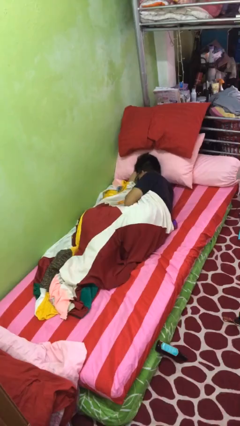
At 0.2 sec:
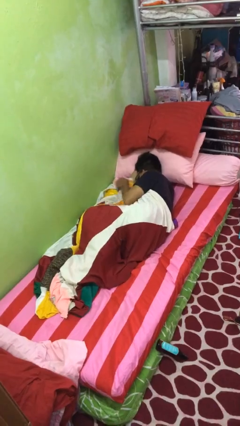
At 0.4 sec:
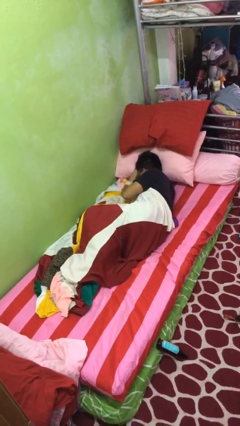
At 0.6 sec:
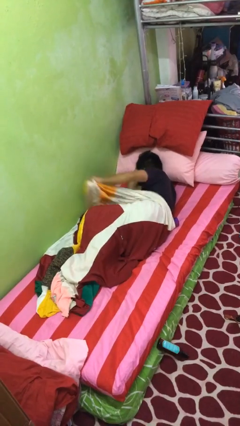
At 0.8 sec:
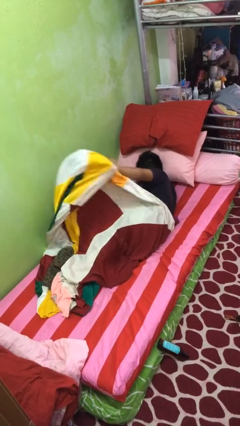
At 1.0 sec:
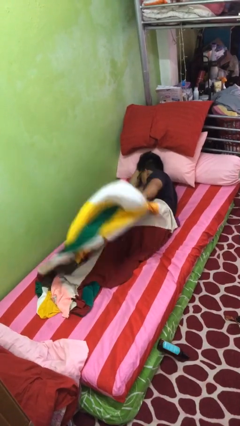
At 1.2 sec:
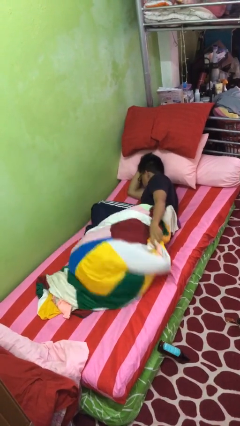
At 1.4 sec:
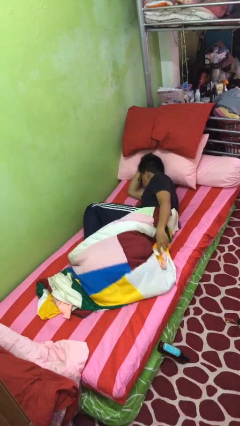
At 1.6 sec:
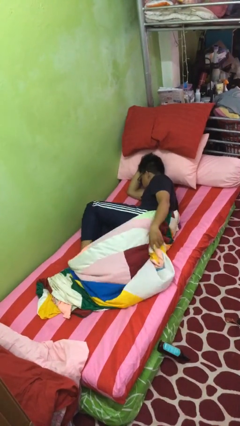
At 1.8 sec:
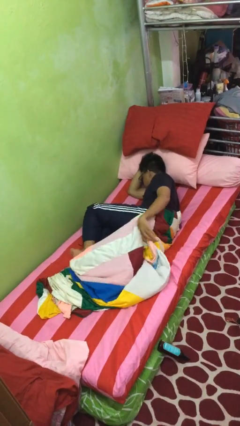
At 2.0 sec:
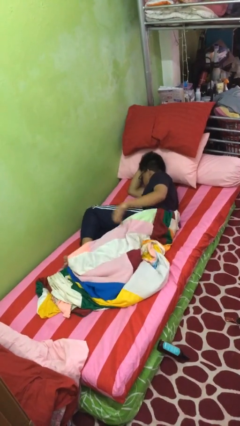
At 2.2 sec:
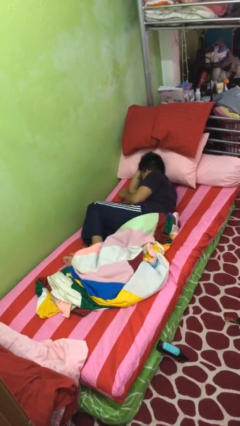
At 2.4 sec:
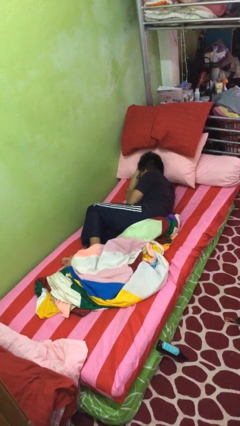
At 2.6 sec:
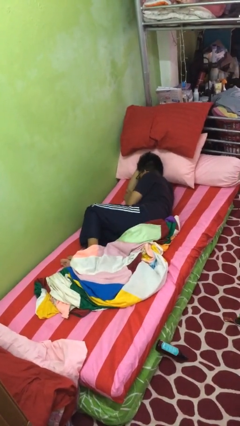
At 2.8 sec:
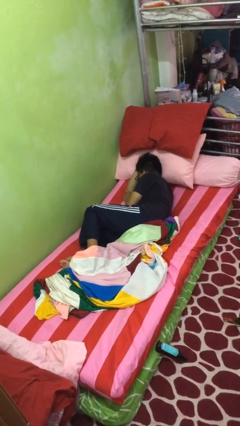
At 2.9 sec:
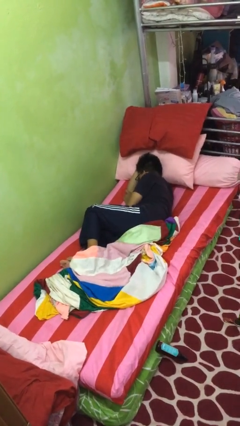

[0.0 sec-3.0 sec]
person uncovers with blanket

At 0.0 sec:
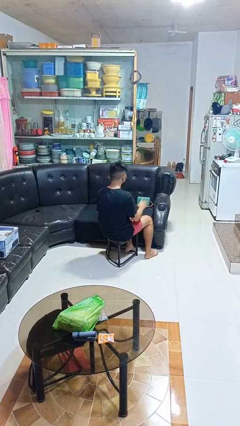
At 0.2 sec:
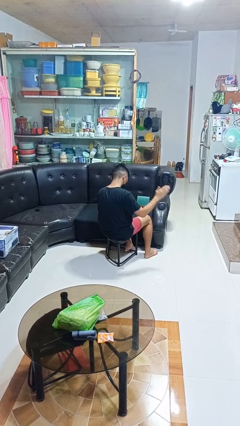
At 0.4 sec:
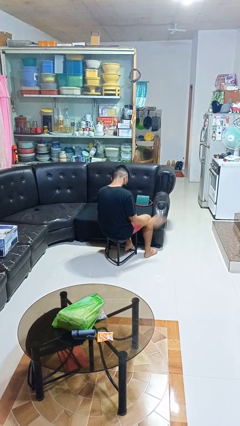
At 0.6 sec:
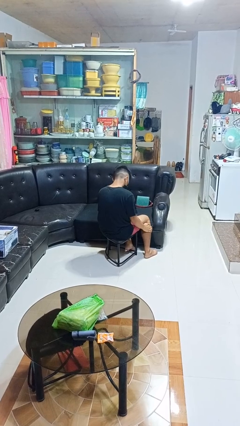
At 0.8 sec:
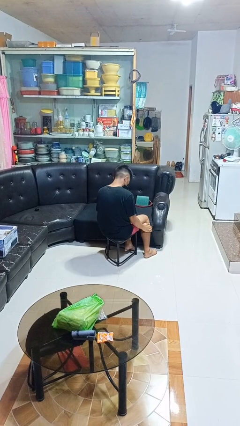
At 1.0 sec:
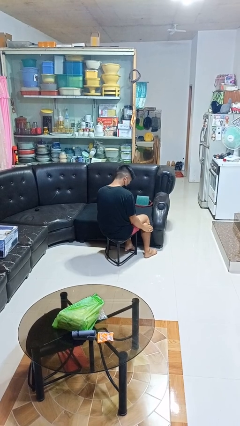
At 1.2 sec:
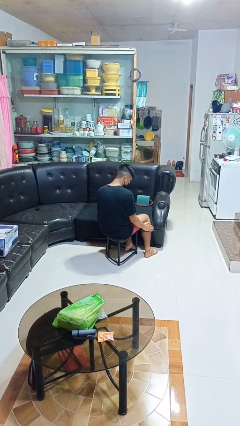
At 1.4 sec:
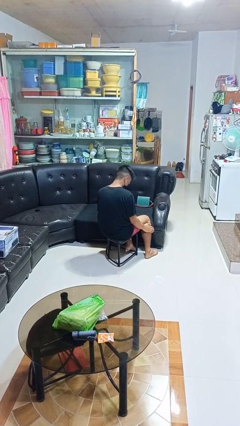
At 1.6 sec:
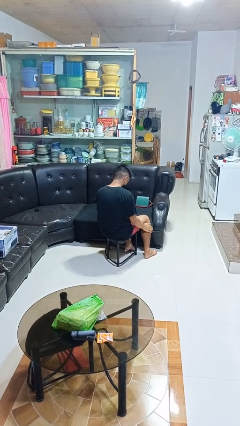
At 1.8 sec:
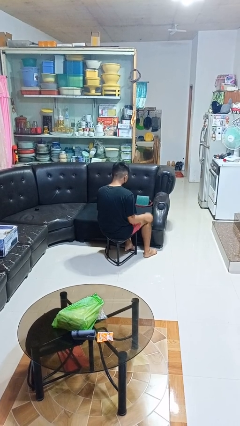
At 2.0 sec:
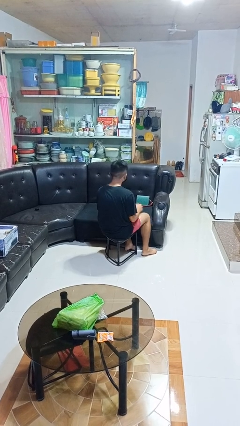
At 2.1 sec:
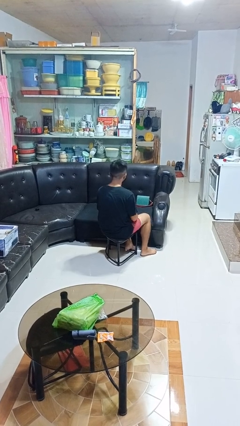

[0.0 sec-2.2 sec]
person swats bug

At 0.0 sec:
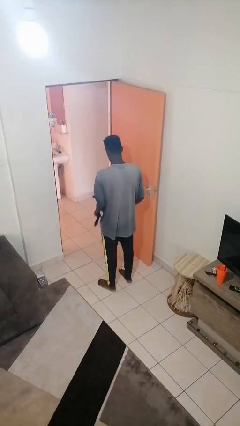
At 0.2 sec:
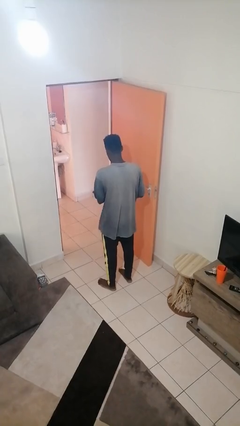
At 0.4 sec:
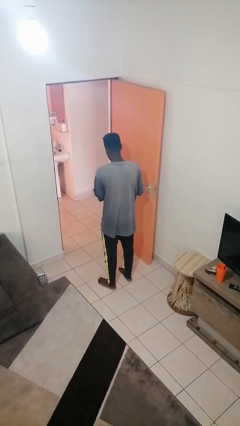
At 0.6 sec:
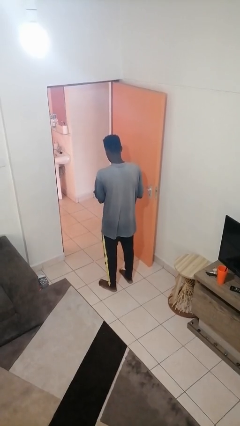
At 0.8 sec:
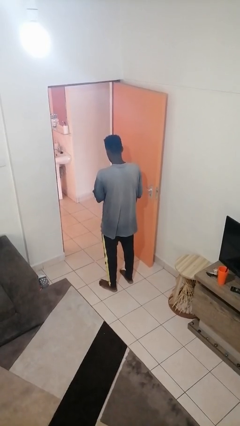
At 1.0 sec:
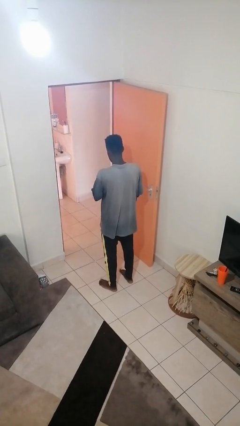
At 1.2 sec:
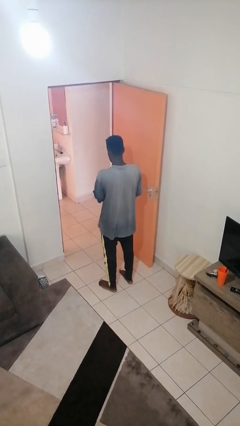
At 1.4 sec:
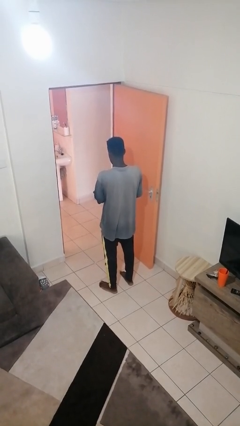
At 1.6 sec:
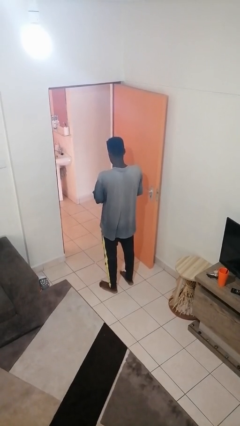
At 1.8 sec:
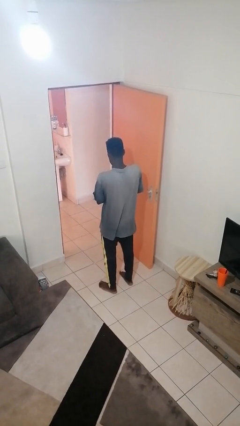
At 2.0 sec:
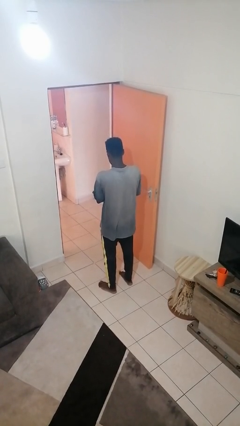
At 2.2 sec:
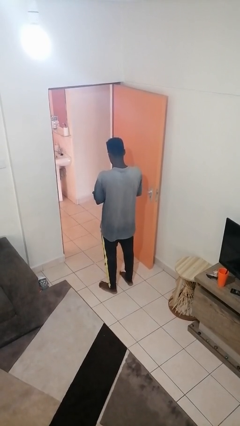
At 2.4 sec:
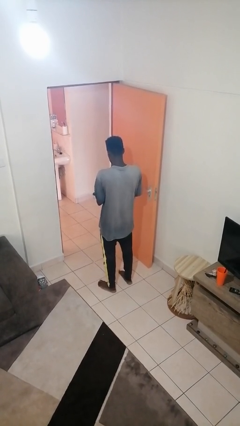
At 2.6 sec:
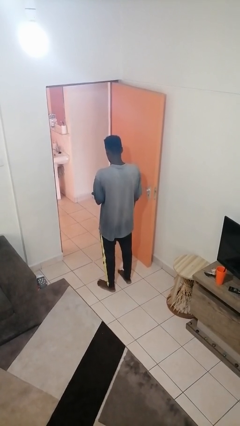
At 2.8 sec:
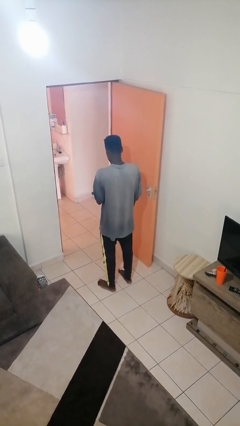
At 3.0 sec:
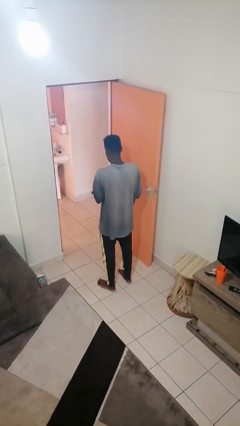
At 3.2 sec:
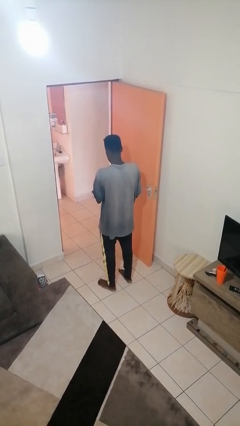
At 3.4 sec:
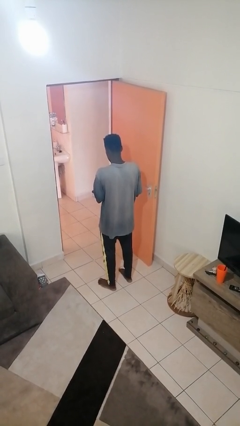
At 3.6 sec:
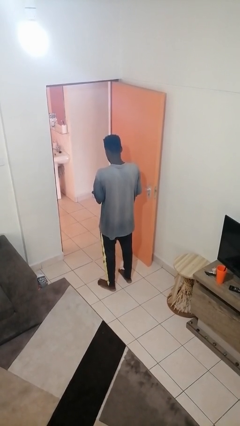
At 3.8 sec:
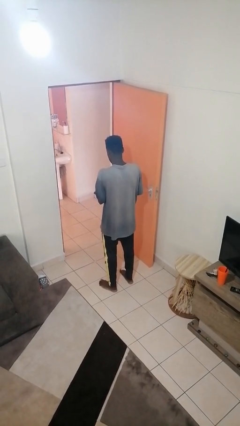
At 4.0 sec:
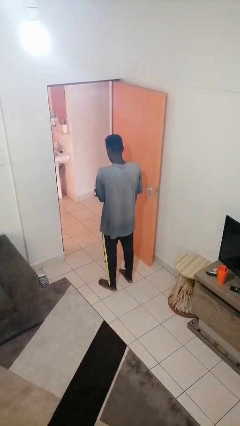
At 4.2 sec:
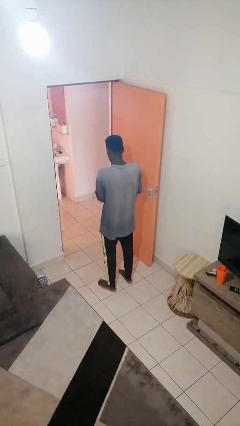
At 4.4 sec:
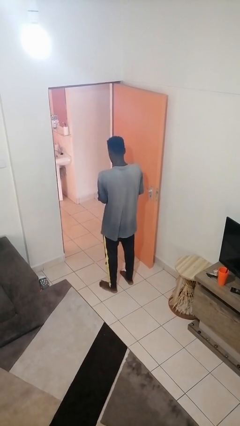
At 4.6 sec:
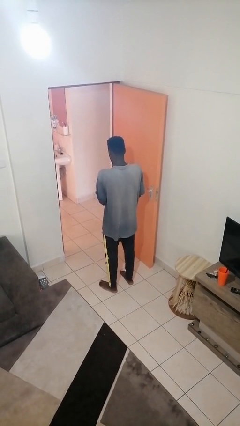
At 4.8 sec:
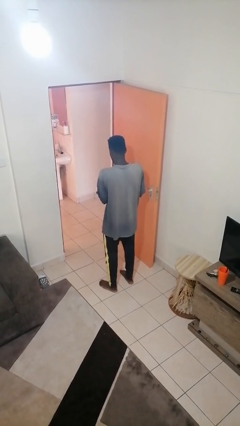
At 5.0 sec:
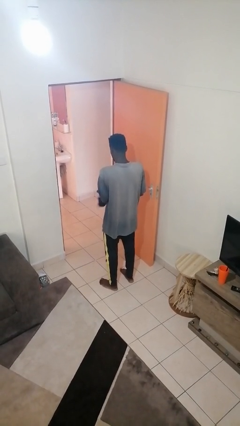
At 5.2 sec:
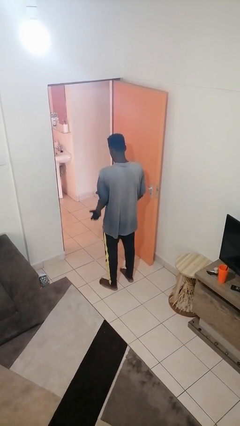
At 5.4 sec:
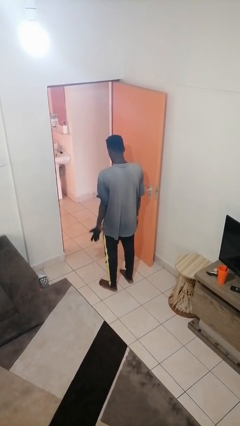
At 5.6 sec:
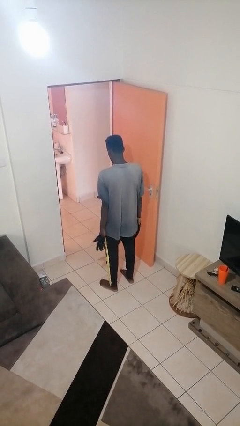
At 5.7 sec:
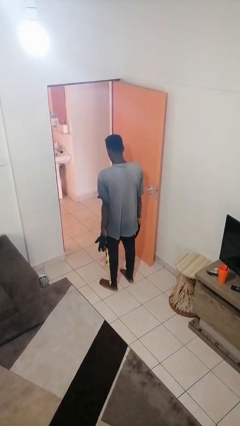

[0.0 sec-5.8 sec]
person puts on gloves

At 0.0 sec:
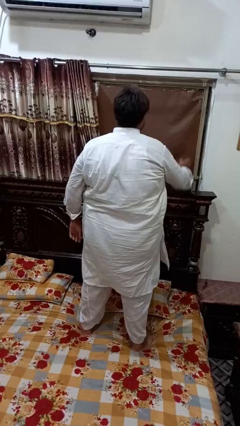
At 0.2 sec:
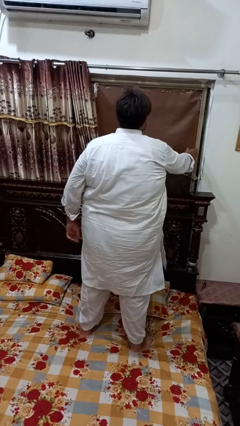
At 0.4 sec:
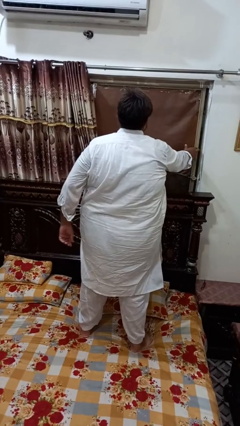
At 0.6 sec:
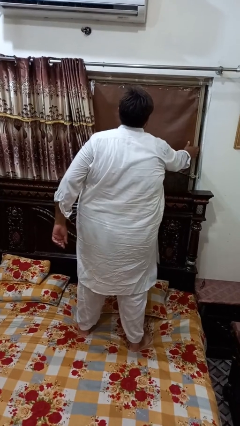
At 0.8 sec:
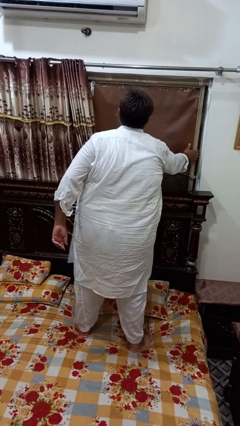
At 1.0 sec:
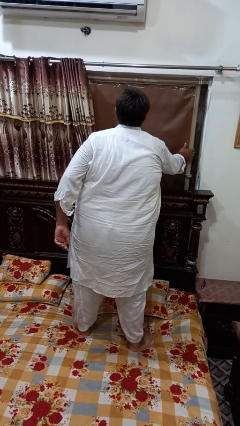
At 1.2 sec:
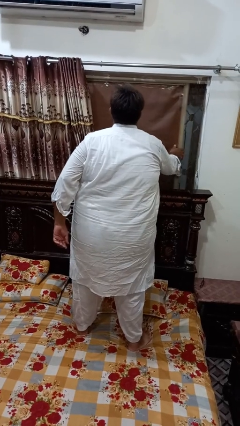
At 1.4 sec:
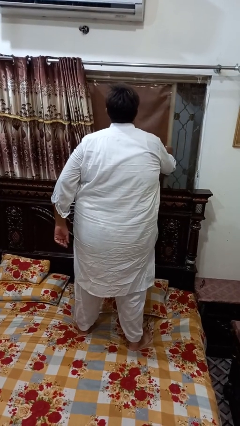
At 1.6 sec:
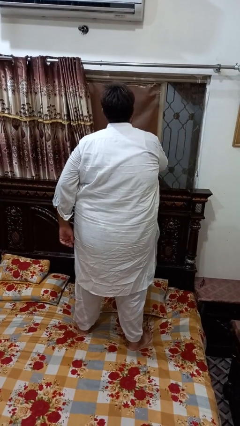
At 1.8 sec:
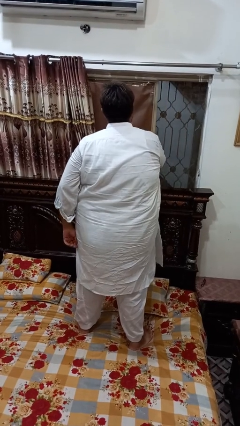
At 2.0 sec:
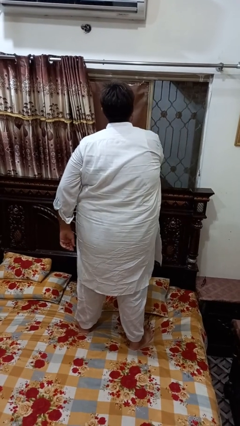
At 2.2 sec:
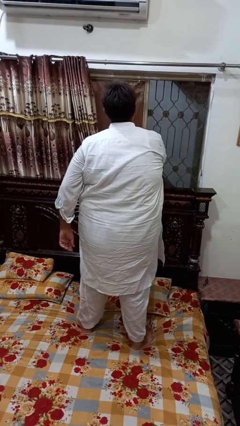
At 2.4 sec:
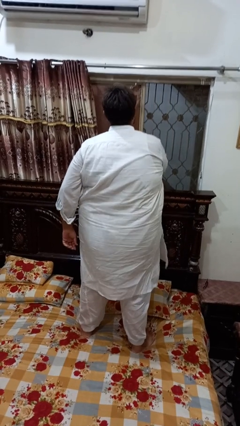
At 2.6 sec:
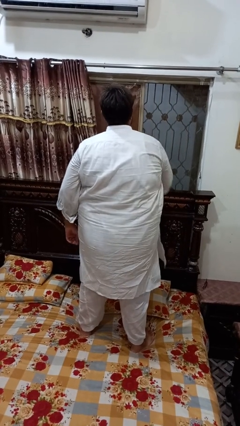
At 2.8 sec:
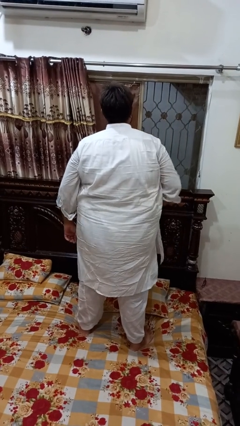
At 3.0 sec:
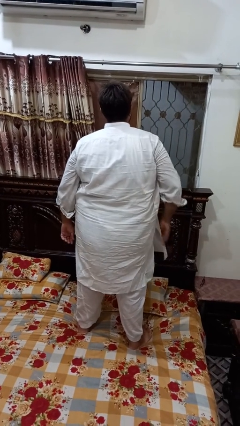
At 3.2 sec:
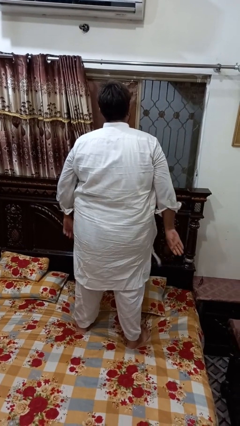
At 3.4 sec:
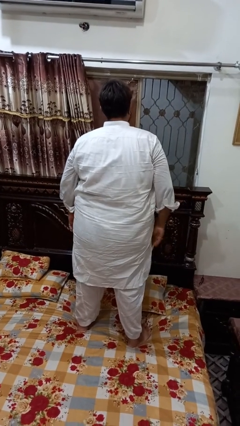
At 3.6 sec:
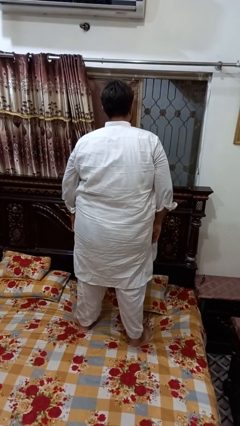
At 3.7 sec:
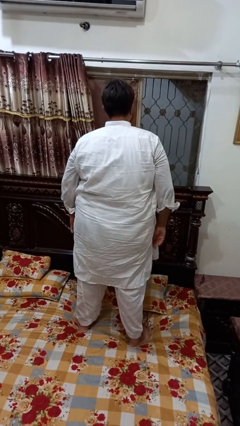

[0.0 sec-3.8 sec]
person opens home window

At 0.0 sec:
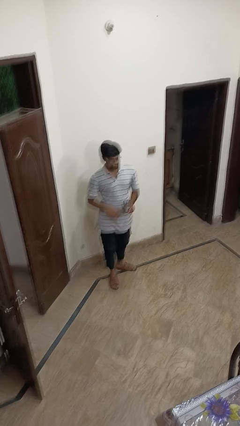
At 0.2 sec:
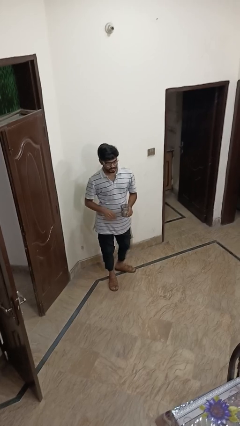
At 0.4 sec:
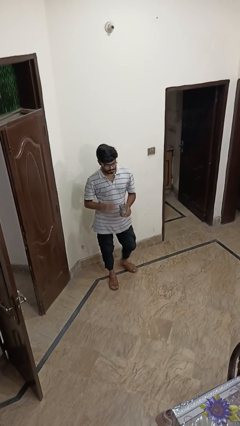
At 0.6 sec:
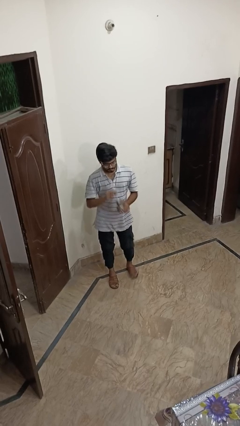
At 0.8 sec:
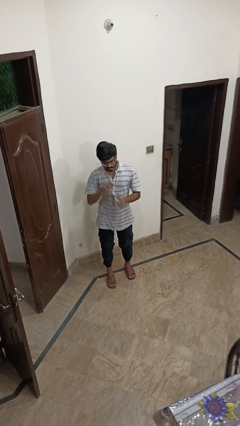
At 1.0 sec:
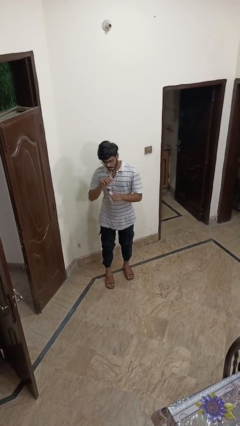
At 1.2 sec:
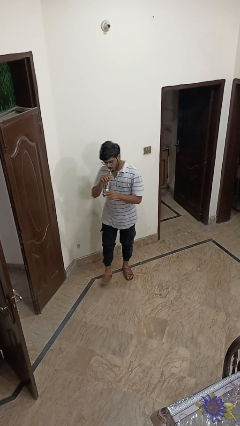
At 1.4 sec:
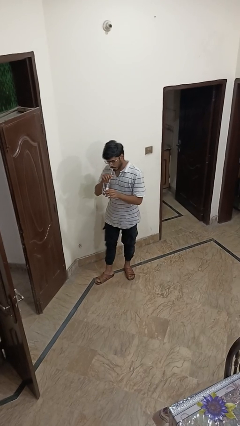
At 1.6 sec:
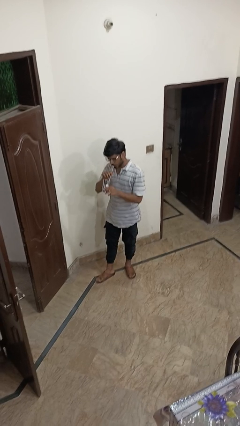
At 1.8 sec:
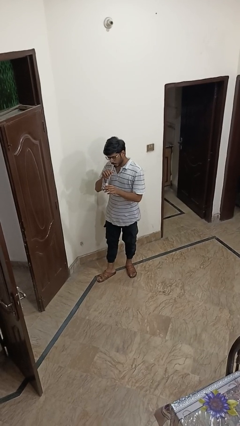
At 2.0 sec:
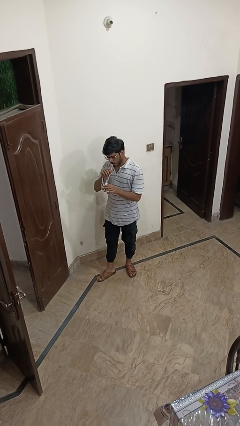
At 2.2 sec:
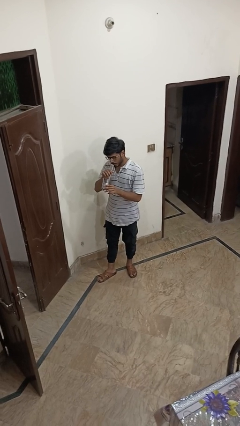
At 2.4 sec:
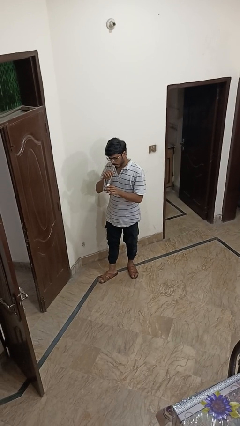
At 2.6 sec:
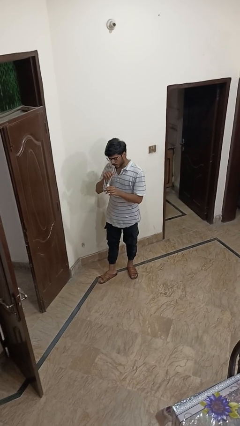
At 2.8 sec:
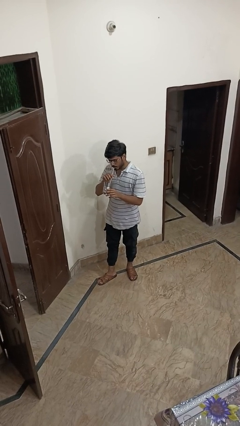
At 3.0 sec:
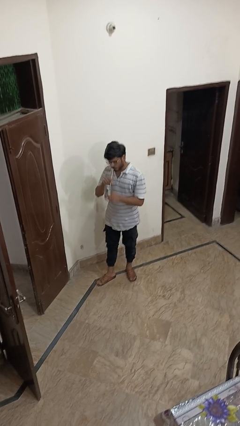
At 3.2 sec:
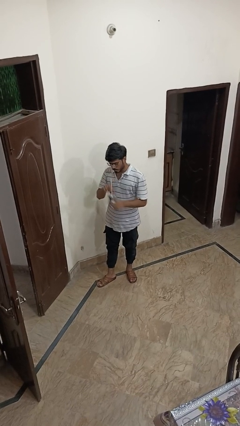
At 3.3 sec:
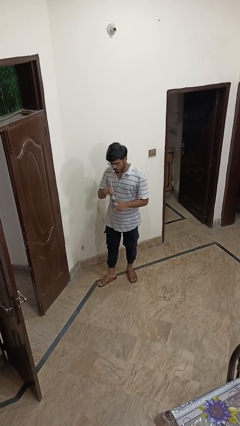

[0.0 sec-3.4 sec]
person drinks from straw
